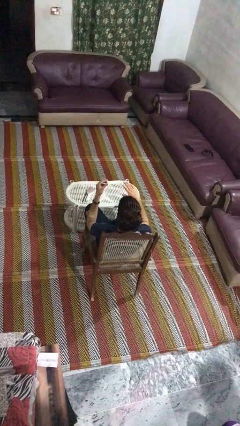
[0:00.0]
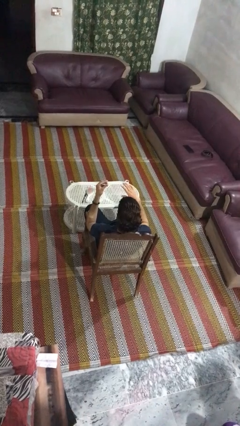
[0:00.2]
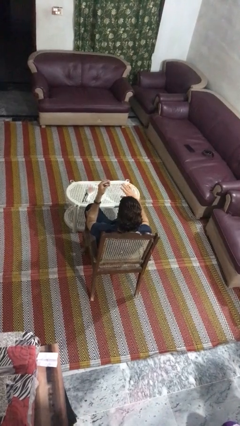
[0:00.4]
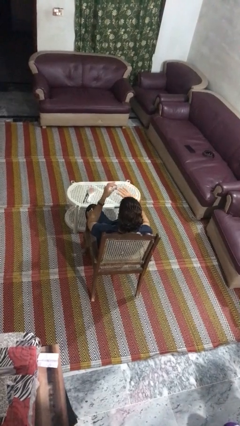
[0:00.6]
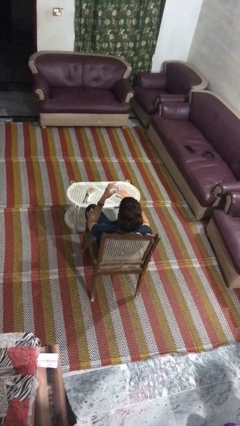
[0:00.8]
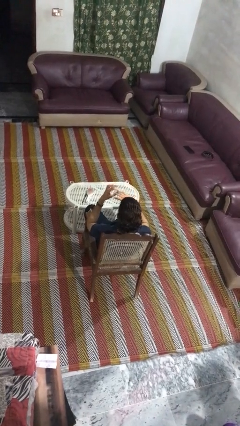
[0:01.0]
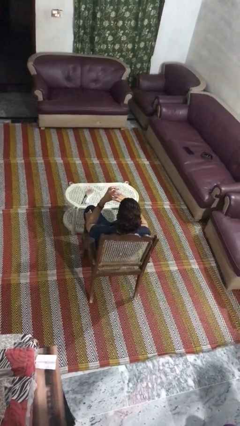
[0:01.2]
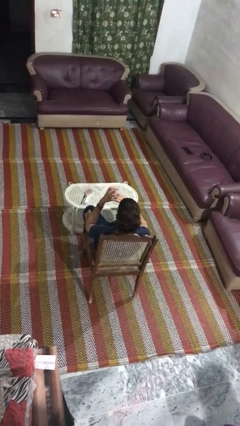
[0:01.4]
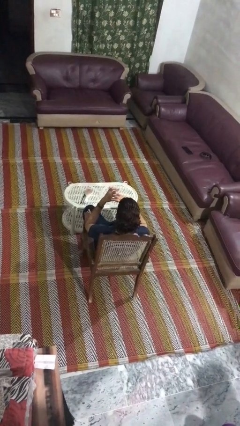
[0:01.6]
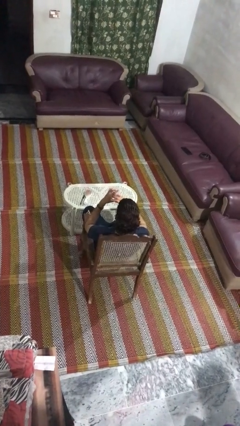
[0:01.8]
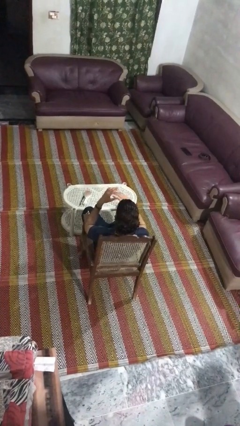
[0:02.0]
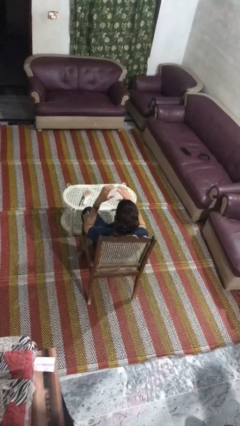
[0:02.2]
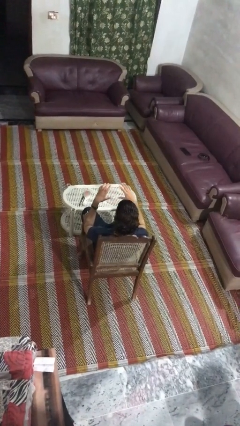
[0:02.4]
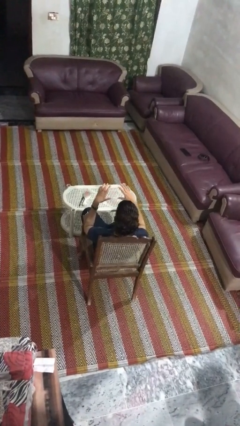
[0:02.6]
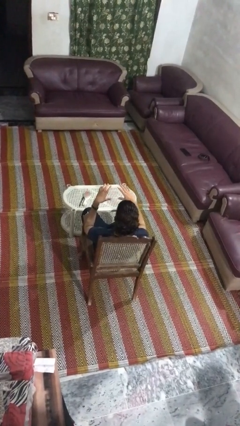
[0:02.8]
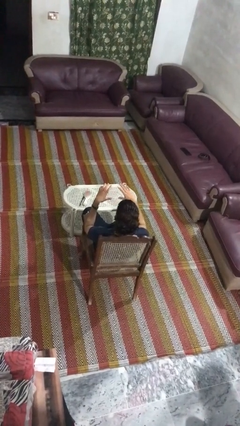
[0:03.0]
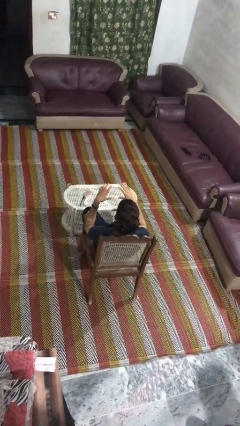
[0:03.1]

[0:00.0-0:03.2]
person puts on ring

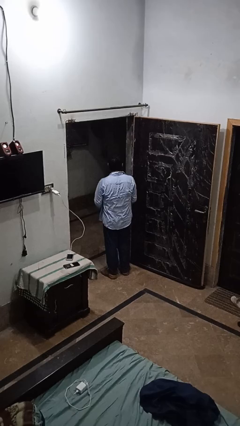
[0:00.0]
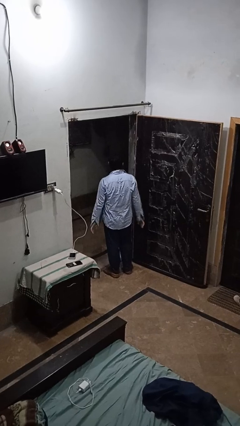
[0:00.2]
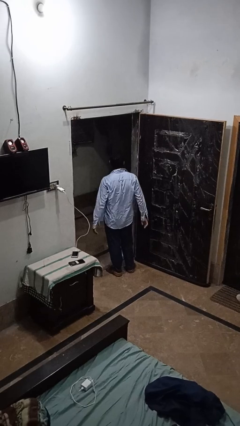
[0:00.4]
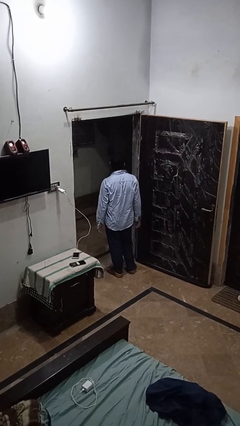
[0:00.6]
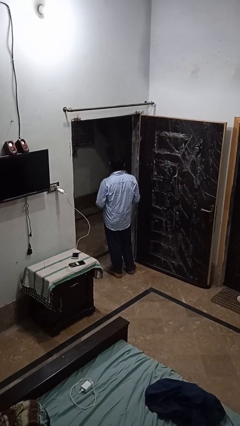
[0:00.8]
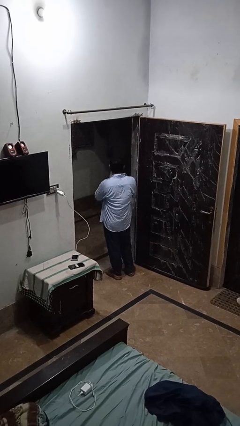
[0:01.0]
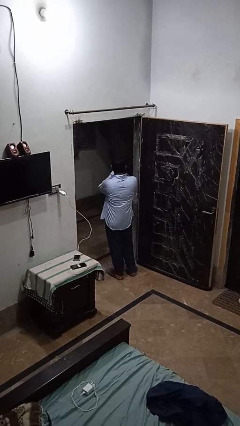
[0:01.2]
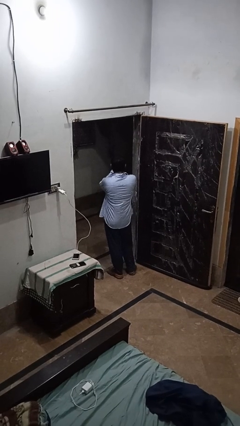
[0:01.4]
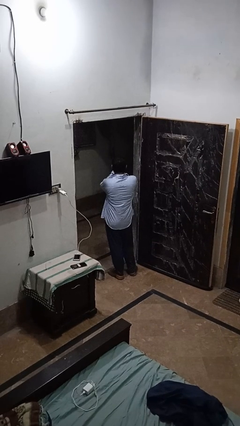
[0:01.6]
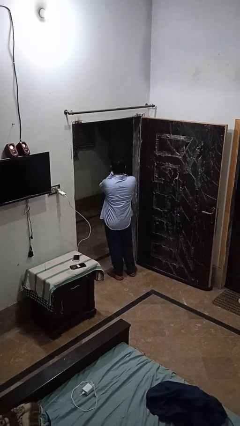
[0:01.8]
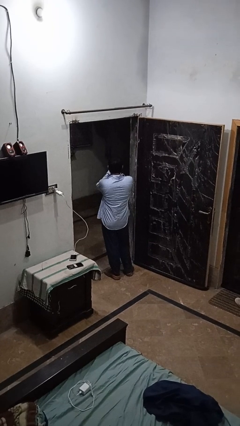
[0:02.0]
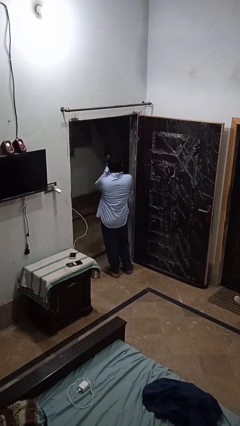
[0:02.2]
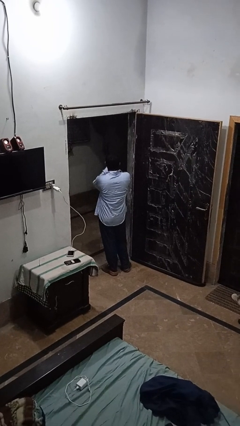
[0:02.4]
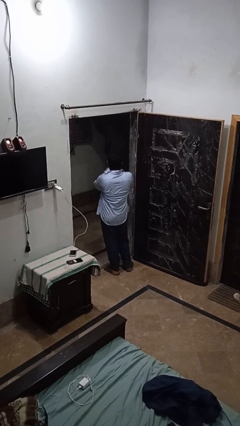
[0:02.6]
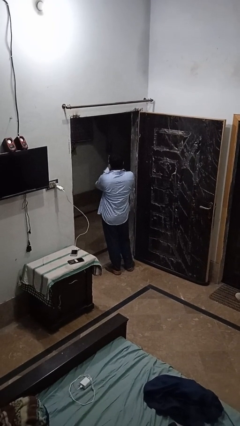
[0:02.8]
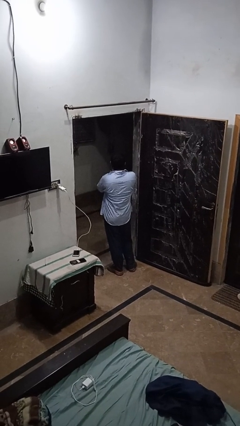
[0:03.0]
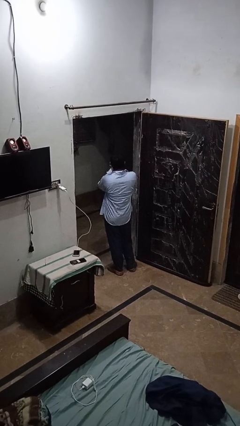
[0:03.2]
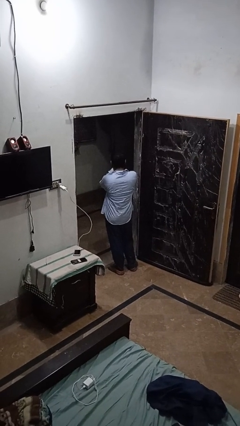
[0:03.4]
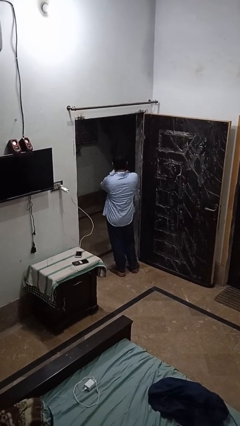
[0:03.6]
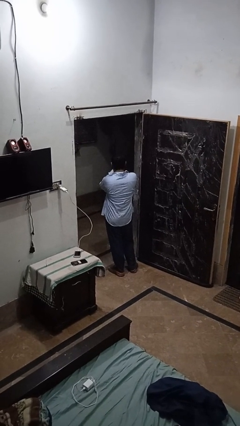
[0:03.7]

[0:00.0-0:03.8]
person blows into hands

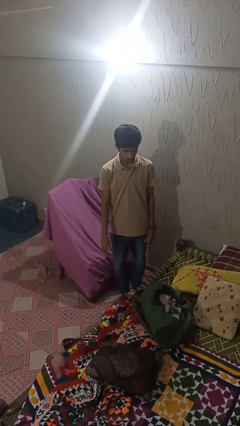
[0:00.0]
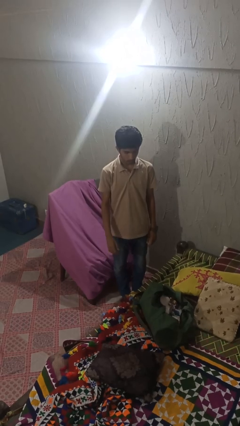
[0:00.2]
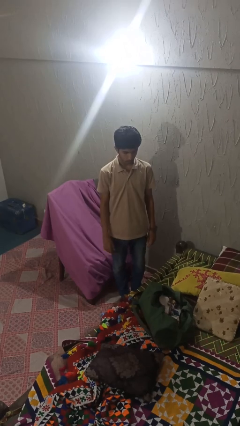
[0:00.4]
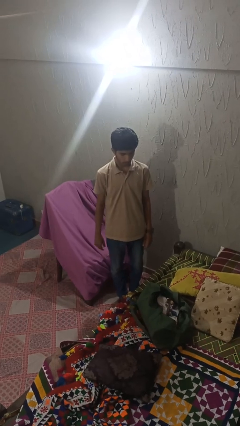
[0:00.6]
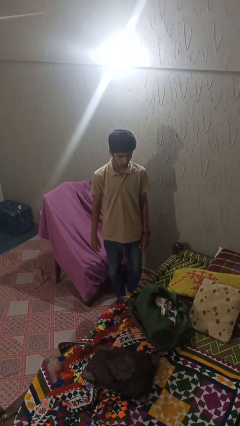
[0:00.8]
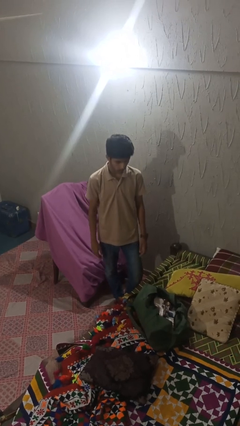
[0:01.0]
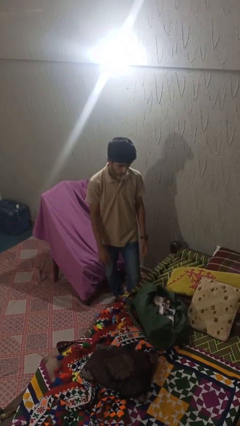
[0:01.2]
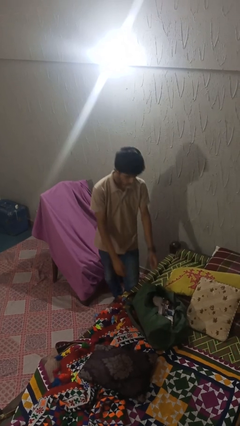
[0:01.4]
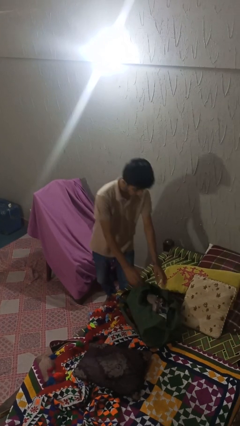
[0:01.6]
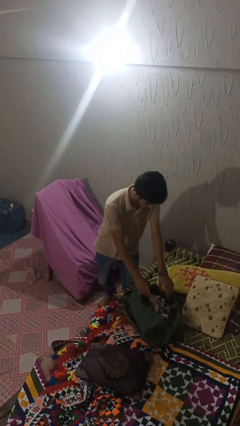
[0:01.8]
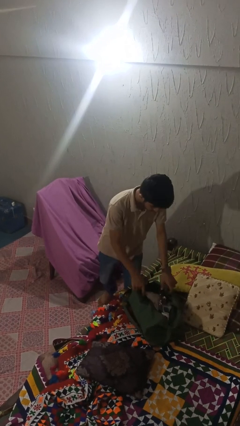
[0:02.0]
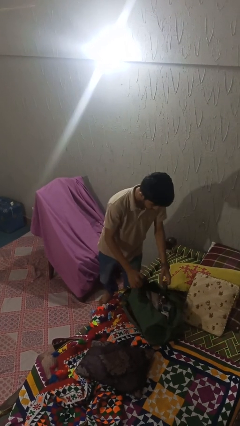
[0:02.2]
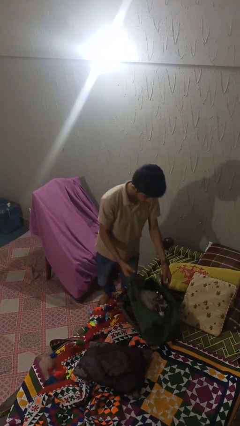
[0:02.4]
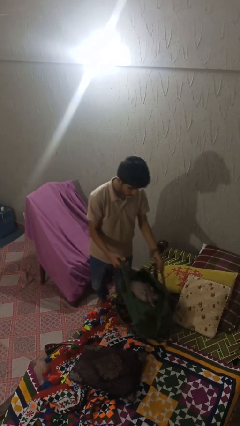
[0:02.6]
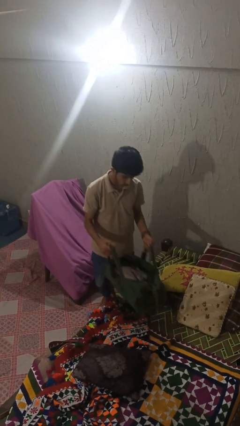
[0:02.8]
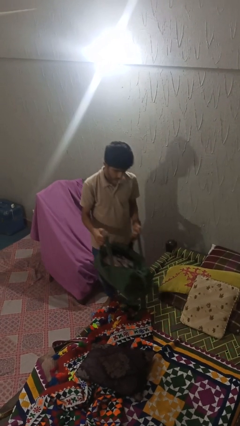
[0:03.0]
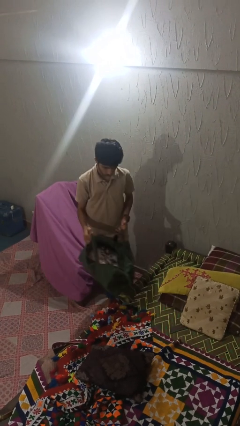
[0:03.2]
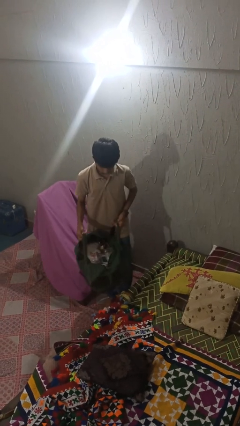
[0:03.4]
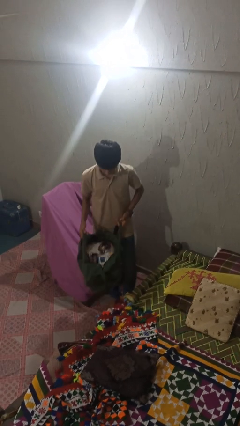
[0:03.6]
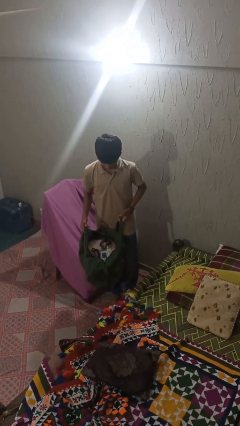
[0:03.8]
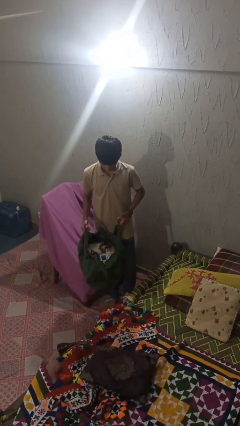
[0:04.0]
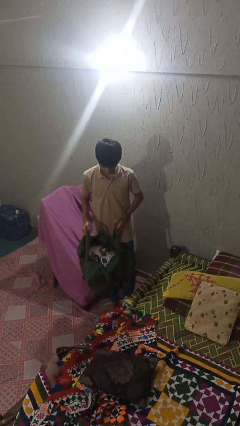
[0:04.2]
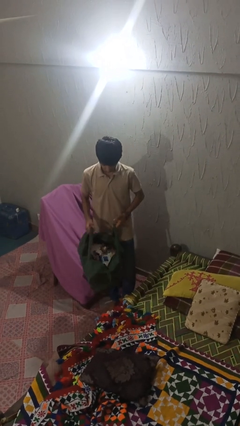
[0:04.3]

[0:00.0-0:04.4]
person picks up object from bed

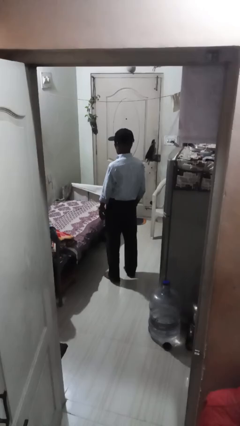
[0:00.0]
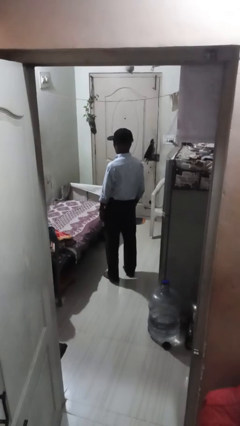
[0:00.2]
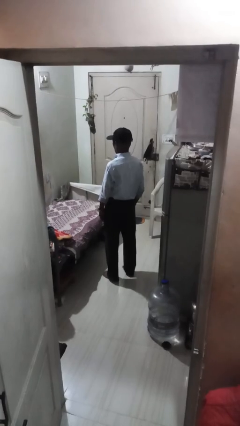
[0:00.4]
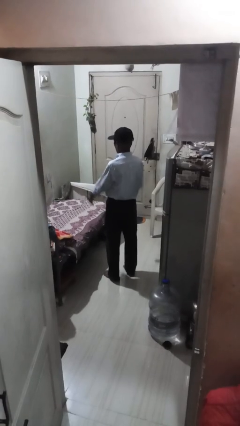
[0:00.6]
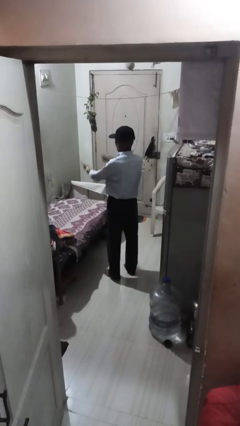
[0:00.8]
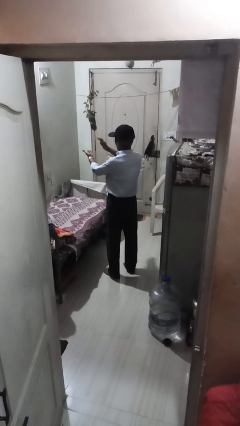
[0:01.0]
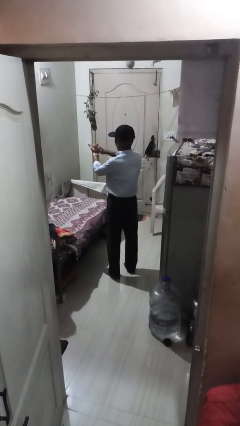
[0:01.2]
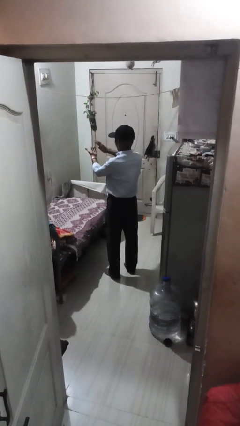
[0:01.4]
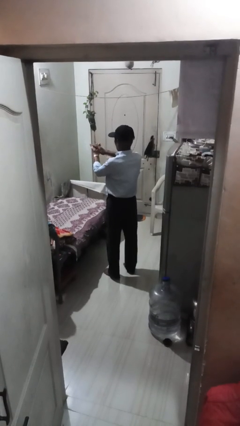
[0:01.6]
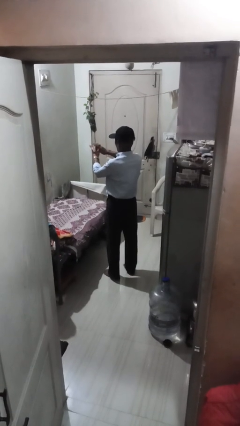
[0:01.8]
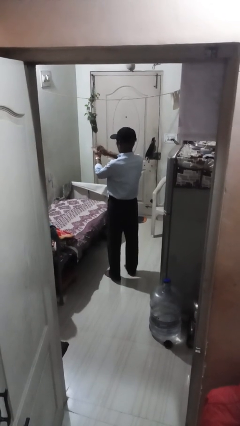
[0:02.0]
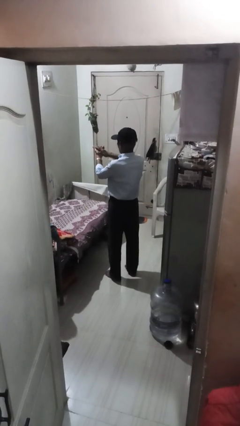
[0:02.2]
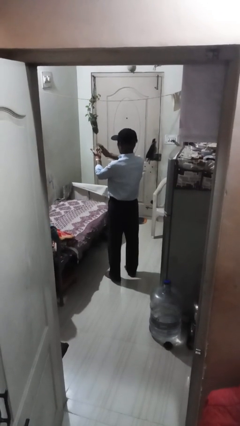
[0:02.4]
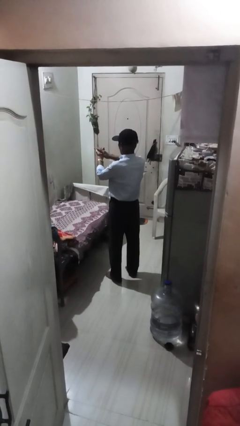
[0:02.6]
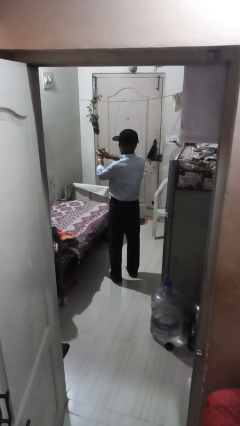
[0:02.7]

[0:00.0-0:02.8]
person claps hands

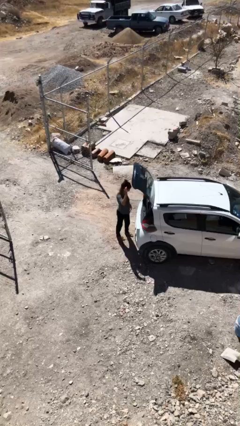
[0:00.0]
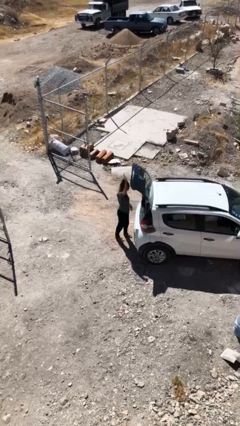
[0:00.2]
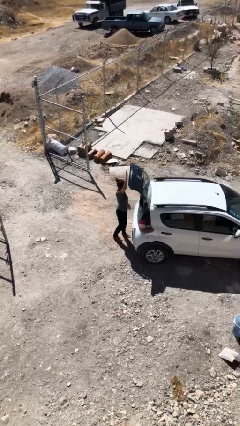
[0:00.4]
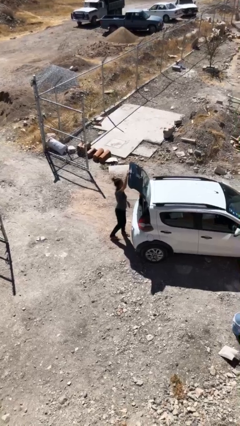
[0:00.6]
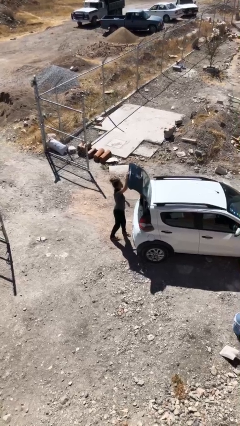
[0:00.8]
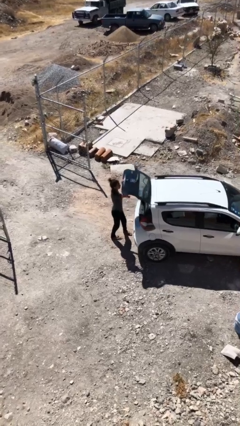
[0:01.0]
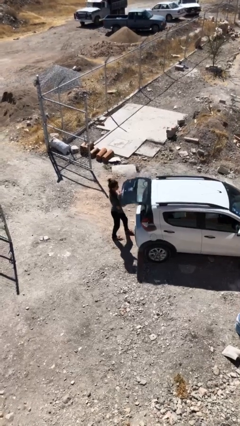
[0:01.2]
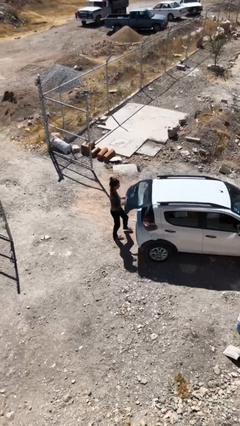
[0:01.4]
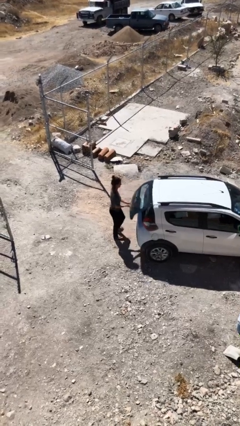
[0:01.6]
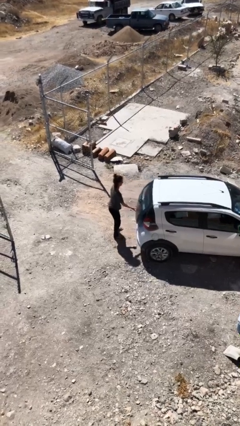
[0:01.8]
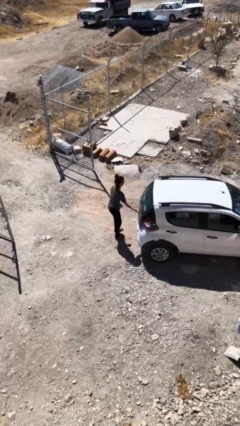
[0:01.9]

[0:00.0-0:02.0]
person closes car trunk

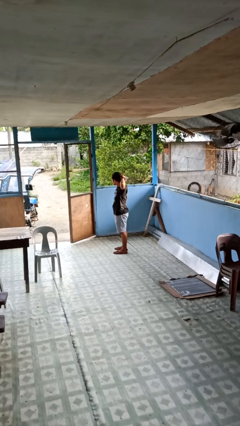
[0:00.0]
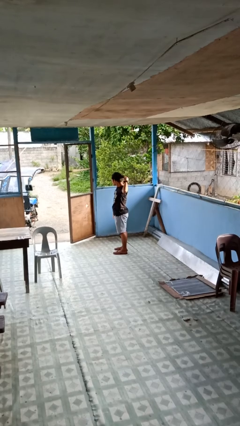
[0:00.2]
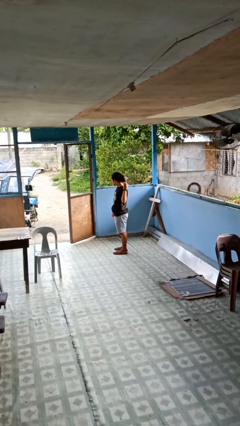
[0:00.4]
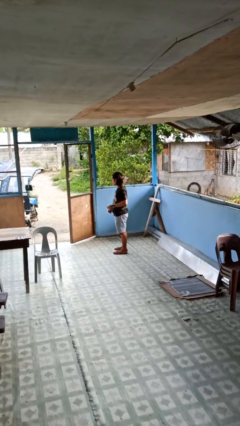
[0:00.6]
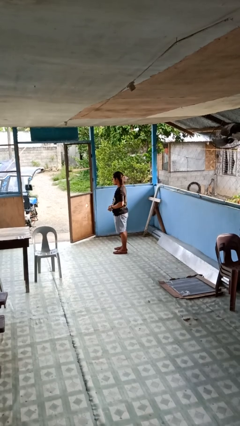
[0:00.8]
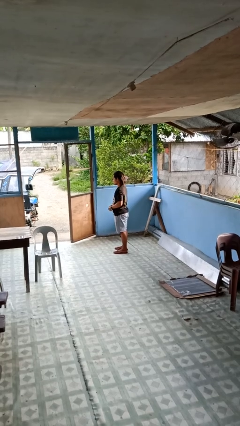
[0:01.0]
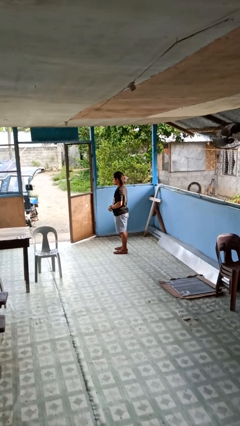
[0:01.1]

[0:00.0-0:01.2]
person takes off hairtie
